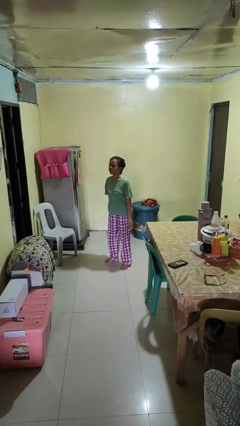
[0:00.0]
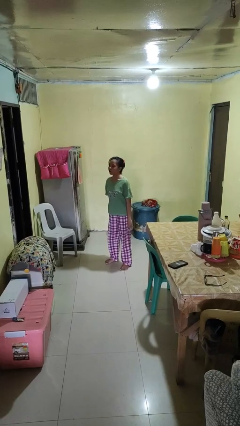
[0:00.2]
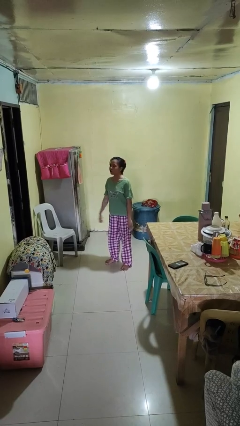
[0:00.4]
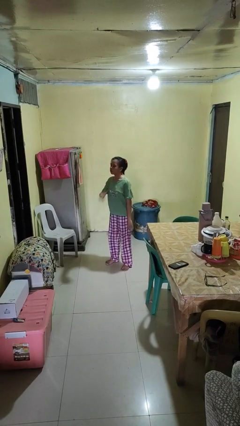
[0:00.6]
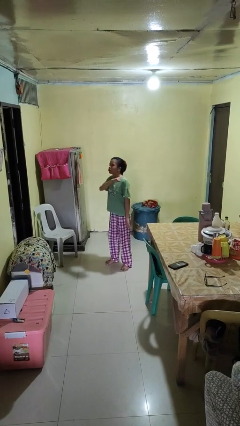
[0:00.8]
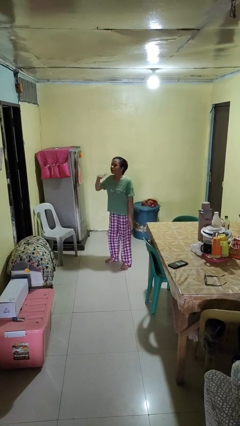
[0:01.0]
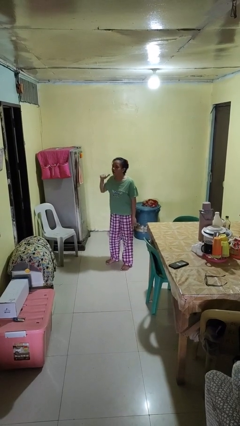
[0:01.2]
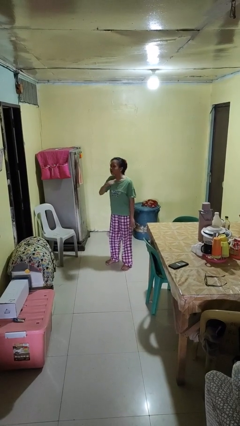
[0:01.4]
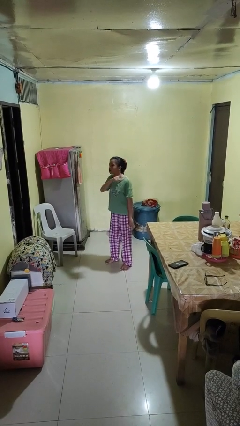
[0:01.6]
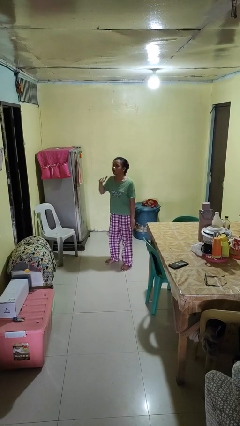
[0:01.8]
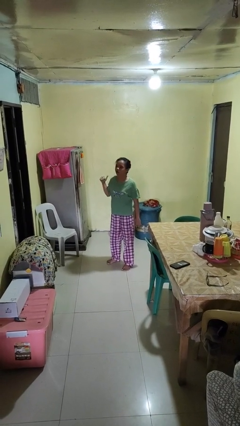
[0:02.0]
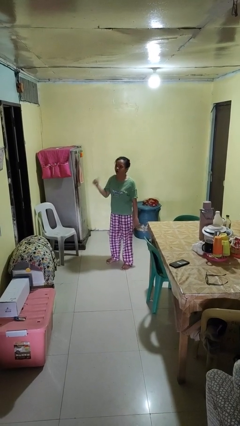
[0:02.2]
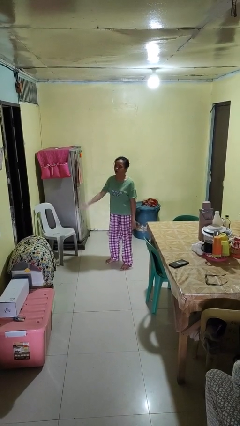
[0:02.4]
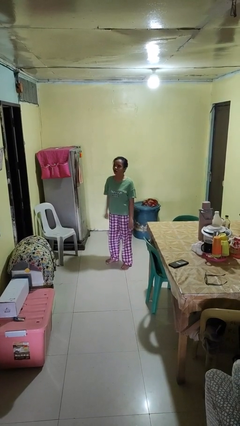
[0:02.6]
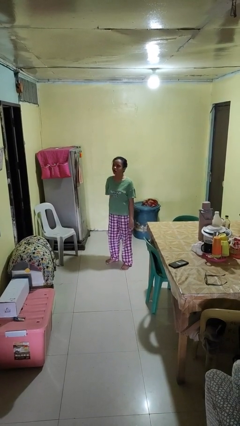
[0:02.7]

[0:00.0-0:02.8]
person gestures cut

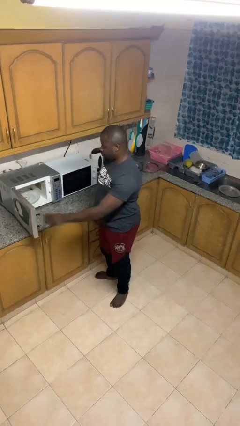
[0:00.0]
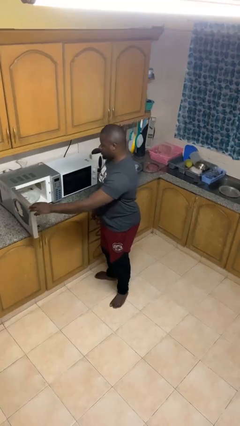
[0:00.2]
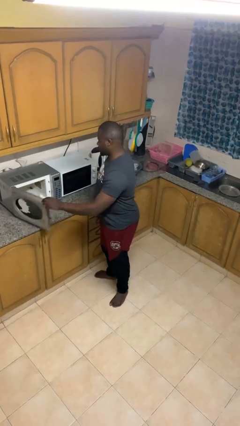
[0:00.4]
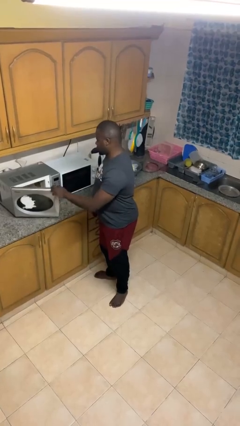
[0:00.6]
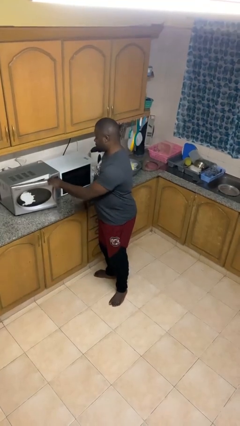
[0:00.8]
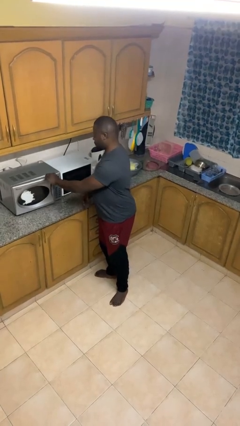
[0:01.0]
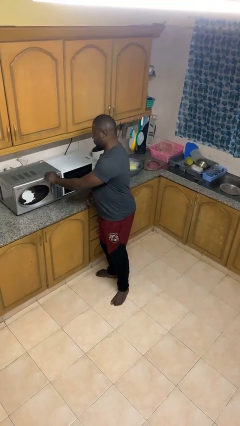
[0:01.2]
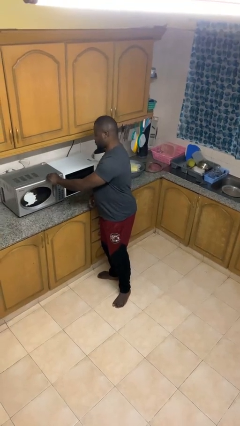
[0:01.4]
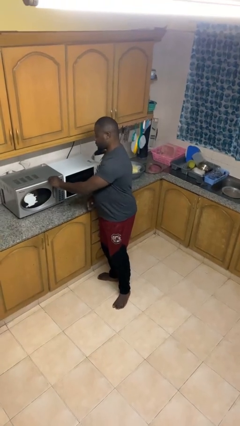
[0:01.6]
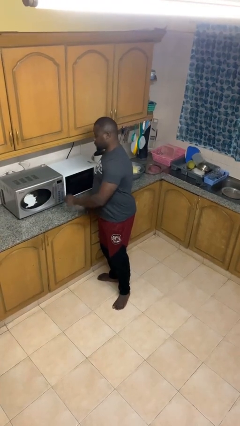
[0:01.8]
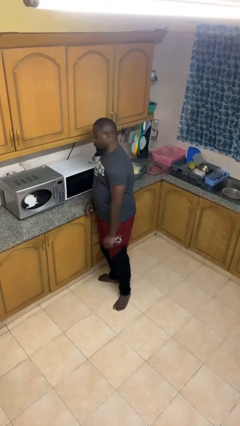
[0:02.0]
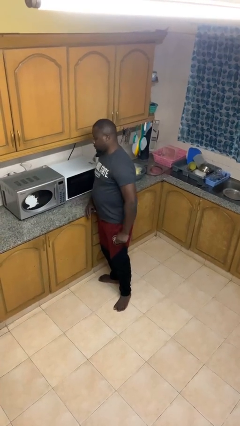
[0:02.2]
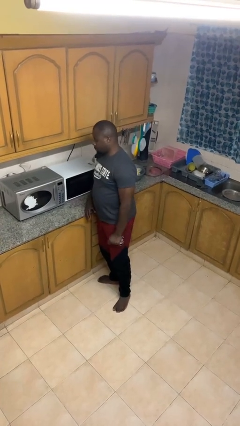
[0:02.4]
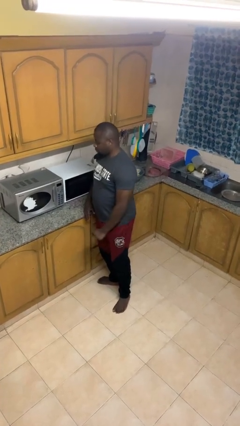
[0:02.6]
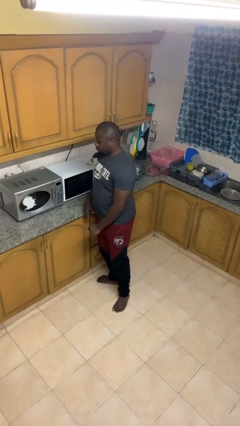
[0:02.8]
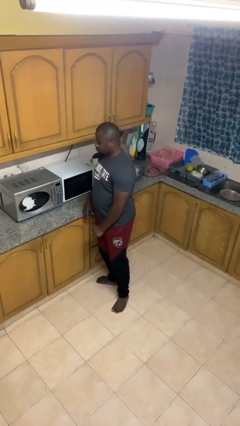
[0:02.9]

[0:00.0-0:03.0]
person closes microwave

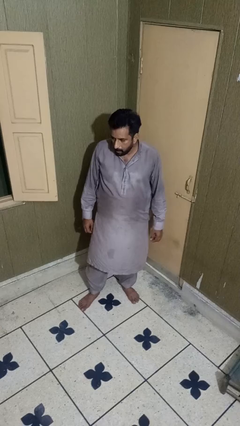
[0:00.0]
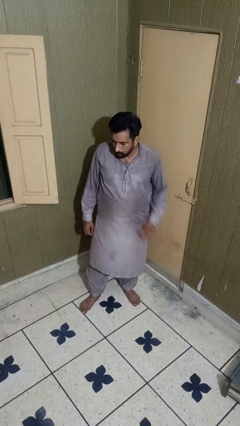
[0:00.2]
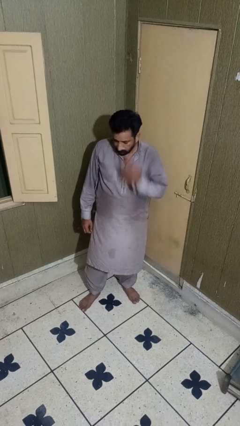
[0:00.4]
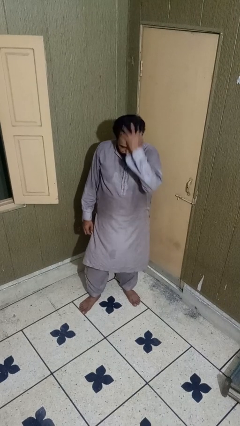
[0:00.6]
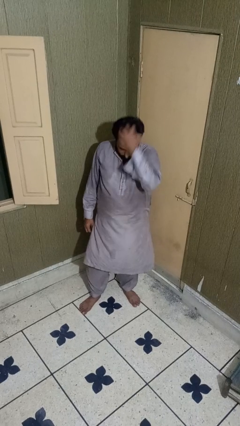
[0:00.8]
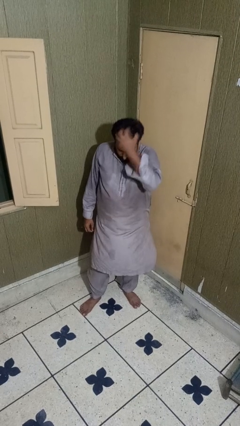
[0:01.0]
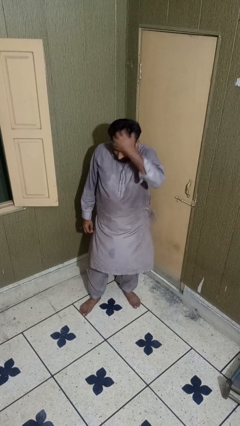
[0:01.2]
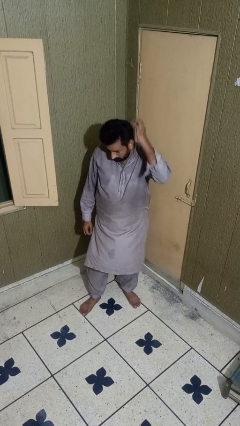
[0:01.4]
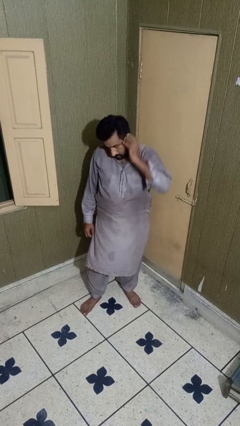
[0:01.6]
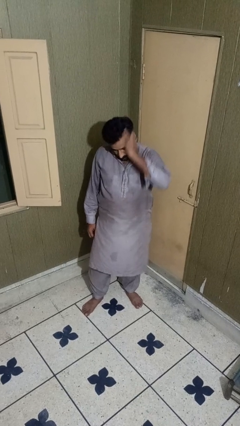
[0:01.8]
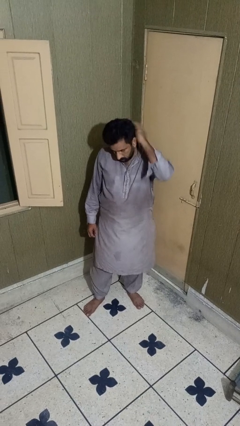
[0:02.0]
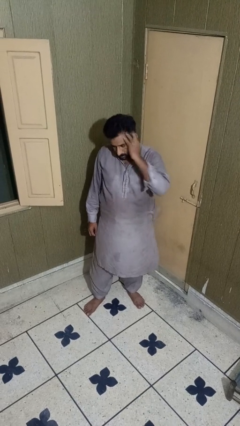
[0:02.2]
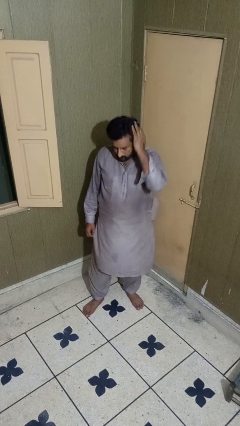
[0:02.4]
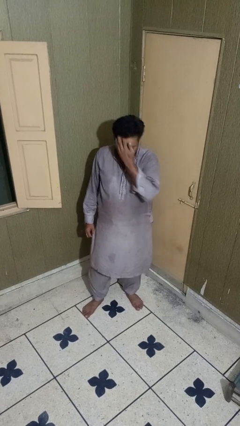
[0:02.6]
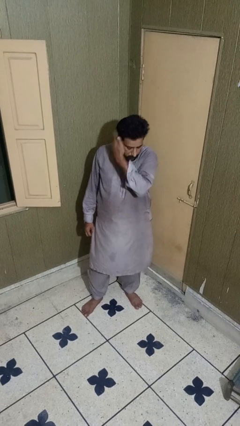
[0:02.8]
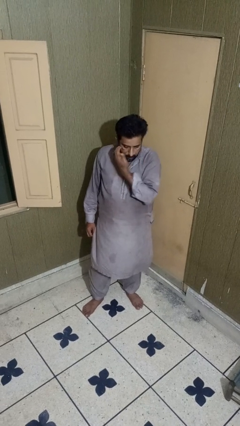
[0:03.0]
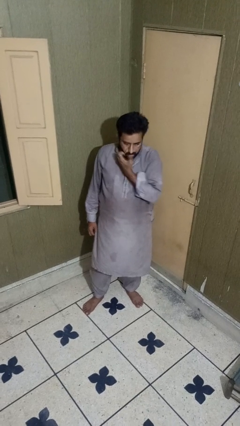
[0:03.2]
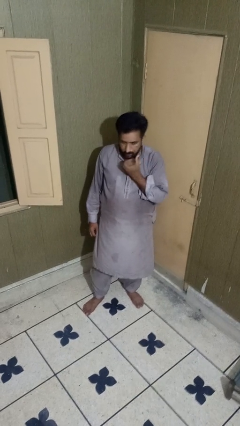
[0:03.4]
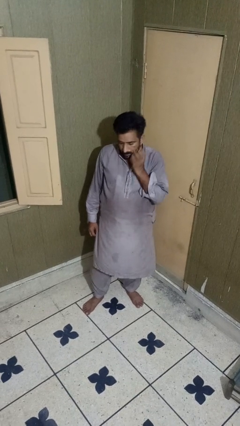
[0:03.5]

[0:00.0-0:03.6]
person scratches face

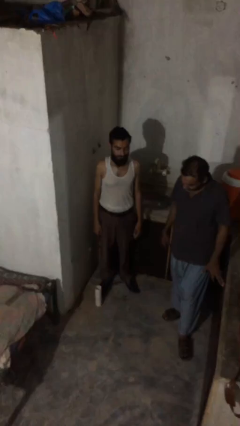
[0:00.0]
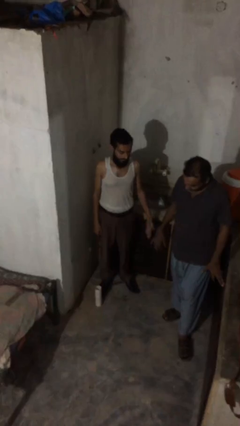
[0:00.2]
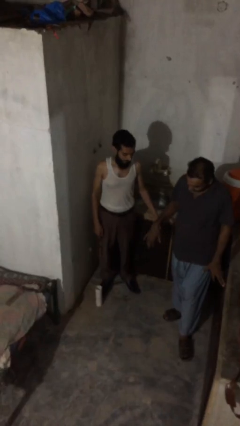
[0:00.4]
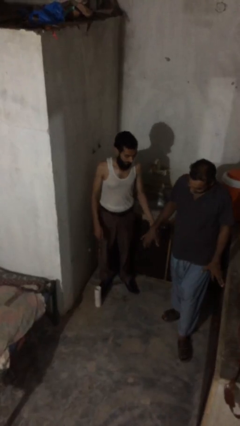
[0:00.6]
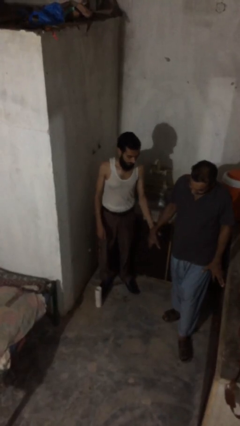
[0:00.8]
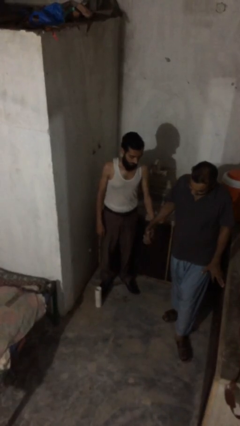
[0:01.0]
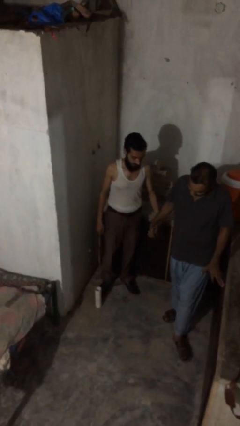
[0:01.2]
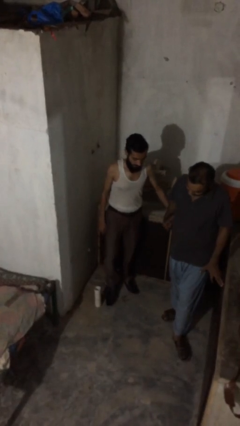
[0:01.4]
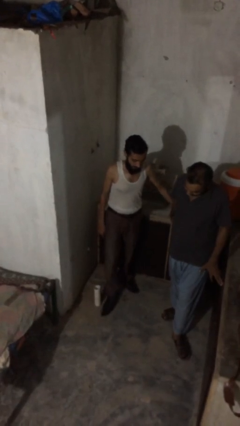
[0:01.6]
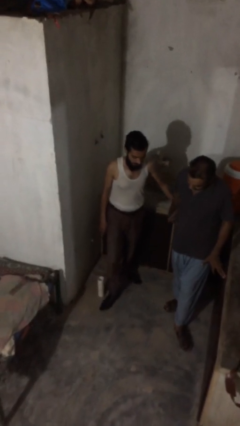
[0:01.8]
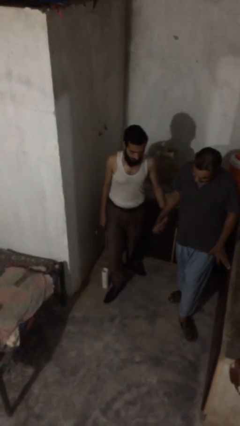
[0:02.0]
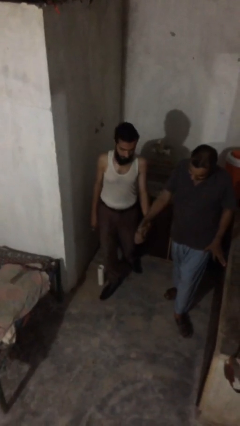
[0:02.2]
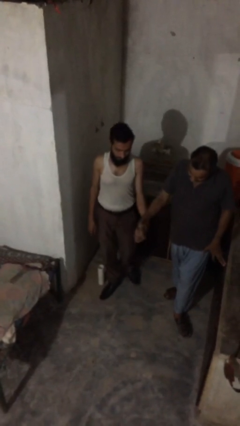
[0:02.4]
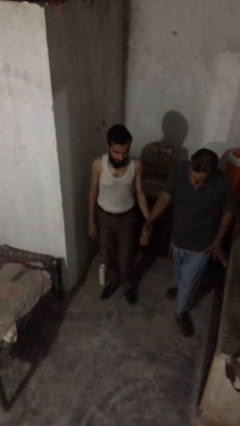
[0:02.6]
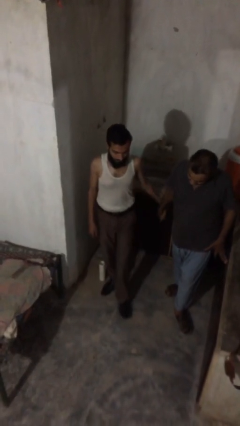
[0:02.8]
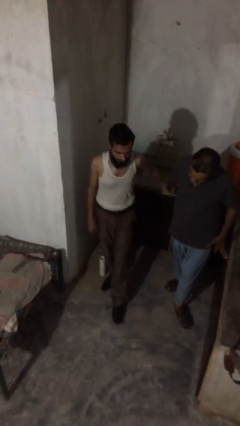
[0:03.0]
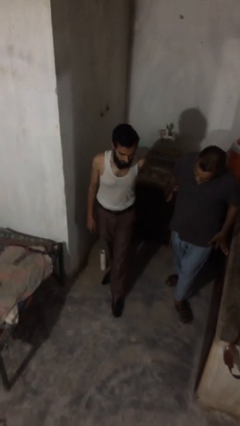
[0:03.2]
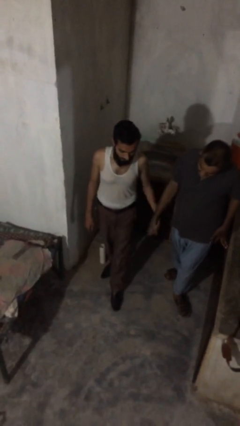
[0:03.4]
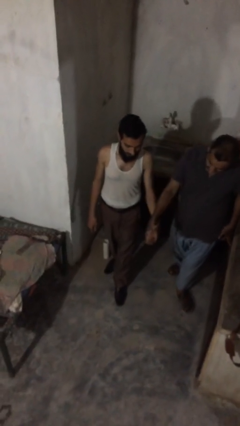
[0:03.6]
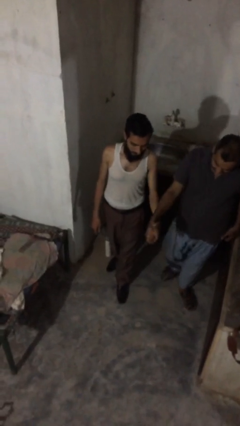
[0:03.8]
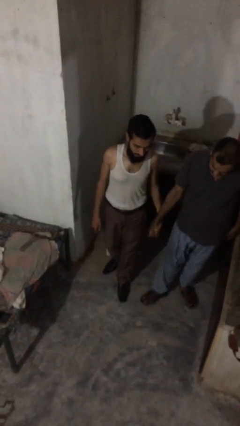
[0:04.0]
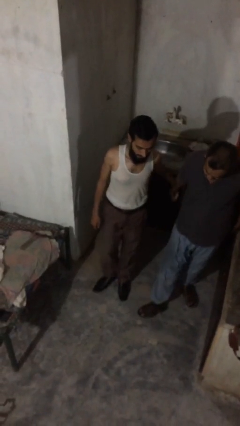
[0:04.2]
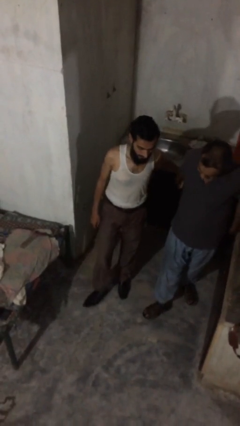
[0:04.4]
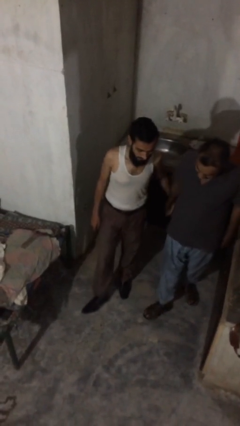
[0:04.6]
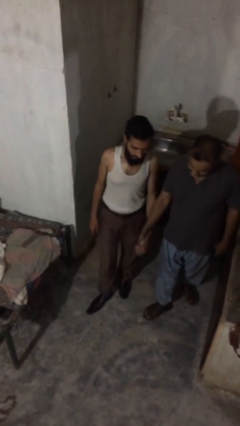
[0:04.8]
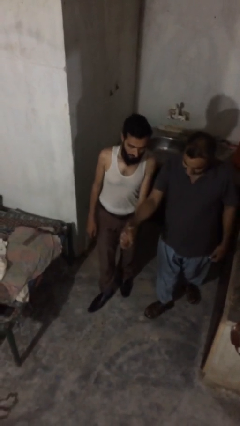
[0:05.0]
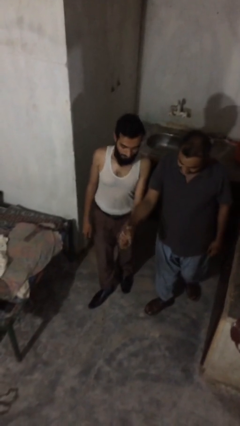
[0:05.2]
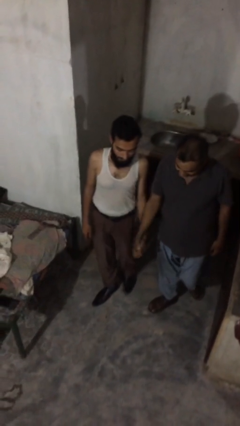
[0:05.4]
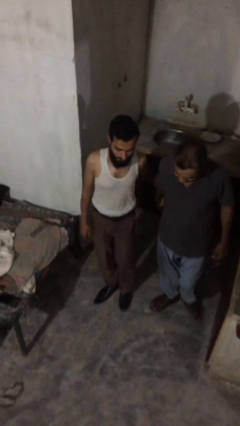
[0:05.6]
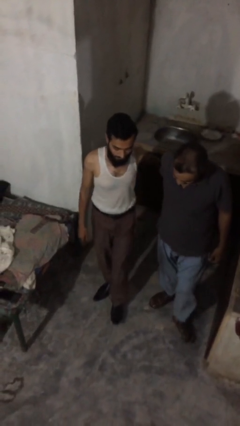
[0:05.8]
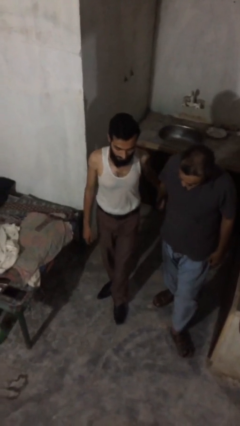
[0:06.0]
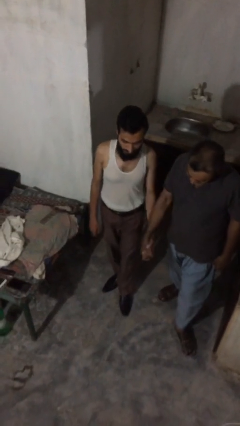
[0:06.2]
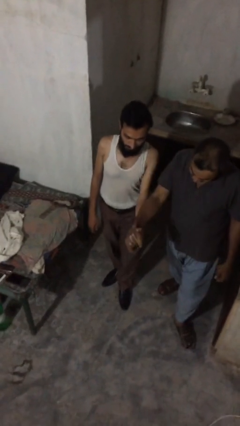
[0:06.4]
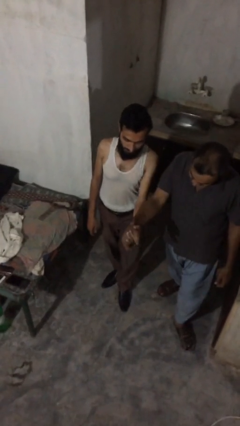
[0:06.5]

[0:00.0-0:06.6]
person holds hand

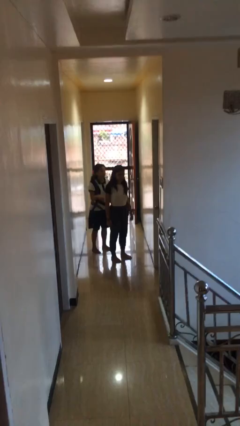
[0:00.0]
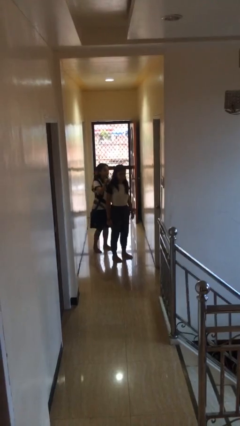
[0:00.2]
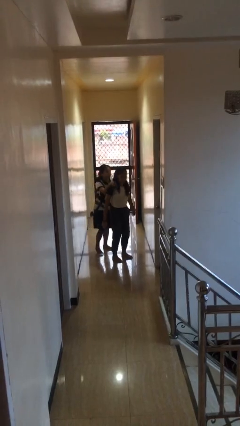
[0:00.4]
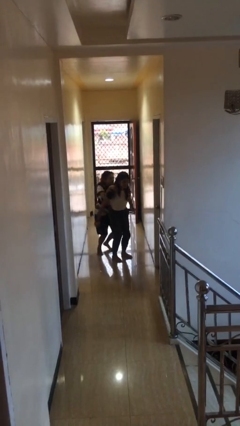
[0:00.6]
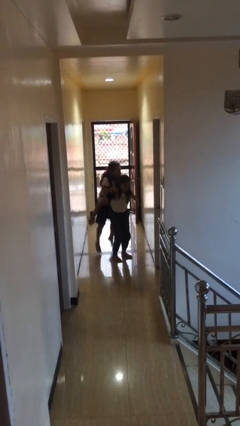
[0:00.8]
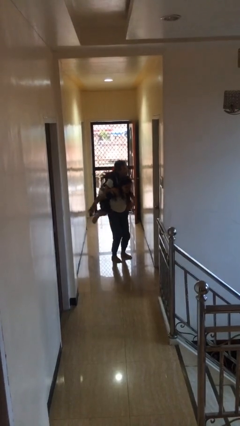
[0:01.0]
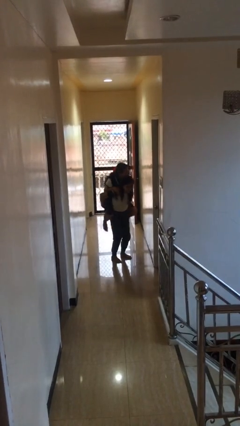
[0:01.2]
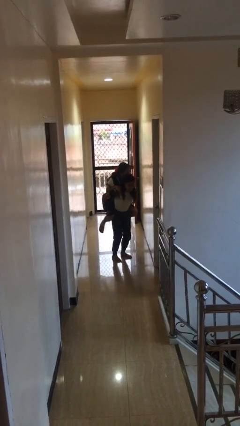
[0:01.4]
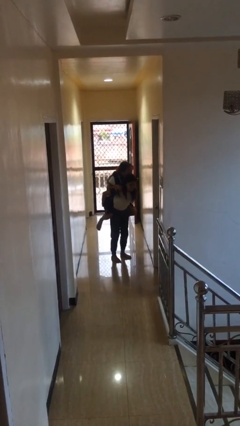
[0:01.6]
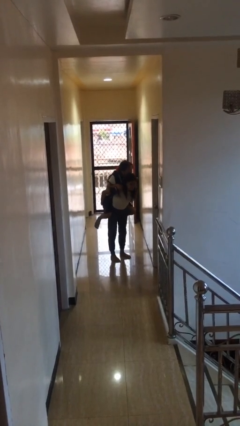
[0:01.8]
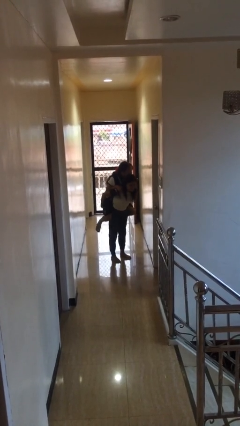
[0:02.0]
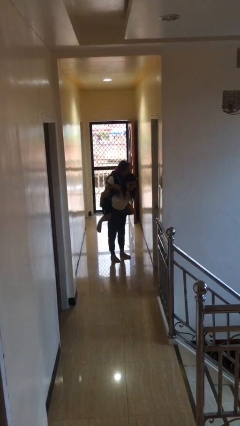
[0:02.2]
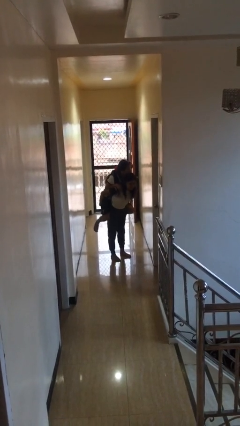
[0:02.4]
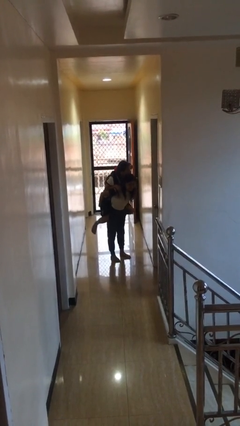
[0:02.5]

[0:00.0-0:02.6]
person carries person over shoulder
